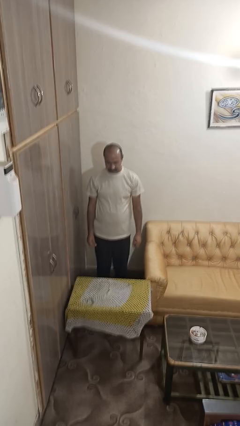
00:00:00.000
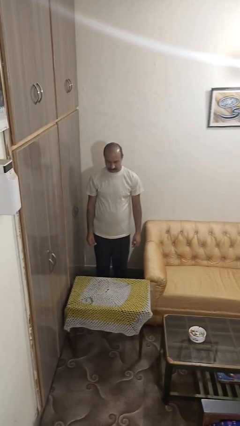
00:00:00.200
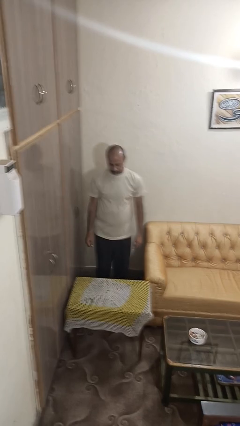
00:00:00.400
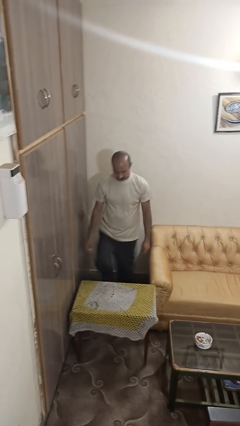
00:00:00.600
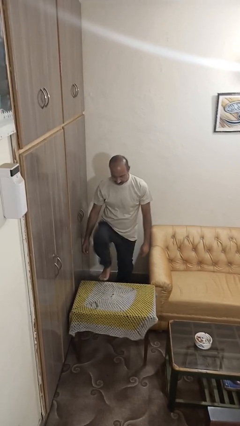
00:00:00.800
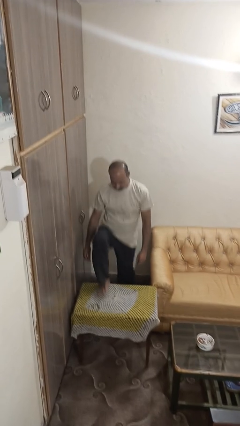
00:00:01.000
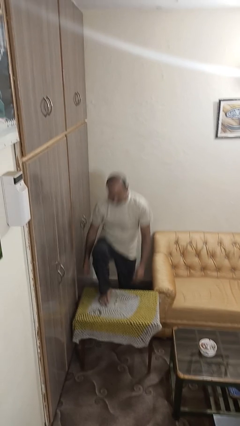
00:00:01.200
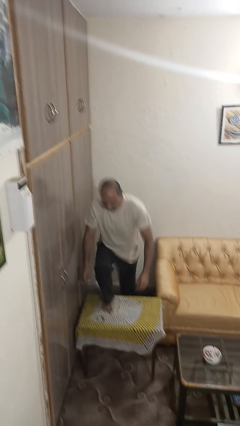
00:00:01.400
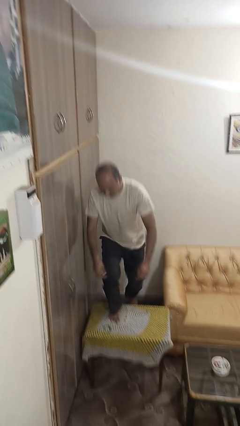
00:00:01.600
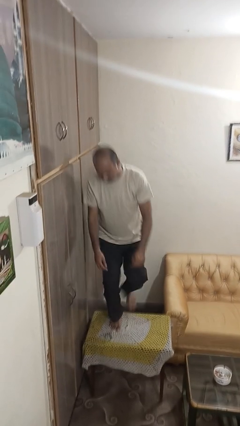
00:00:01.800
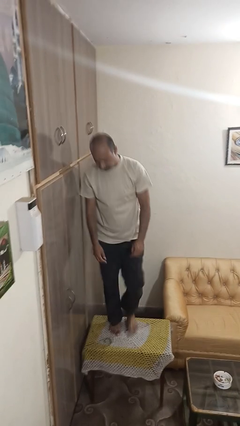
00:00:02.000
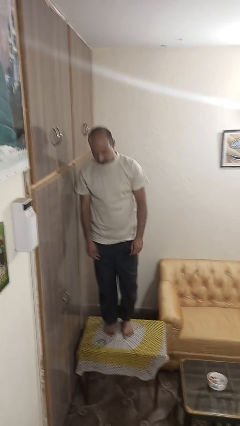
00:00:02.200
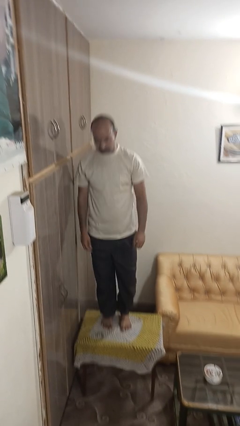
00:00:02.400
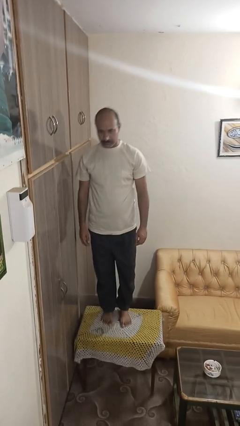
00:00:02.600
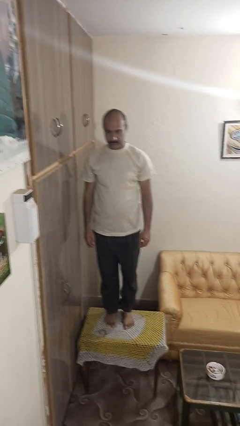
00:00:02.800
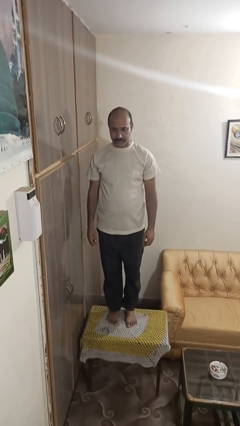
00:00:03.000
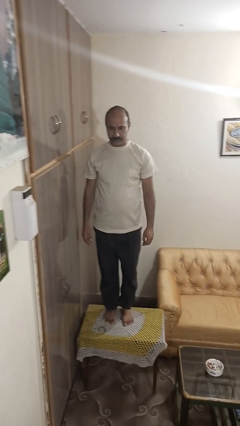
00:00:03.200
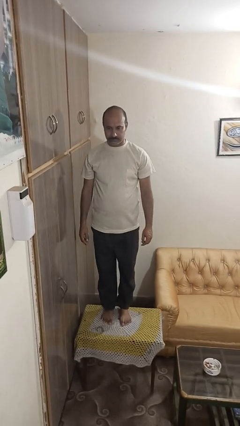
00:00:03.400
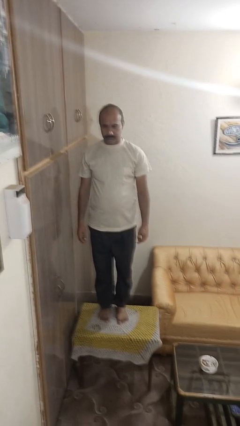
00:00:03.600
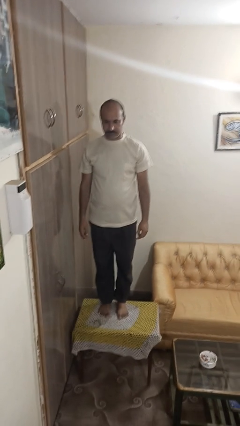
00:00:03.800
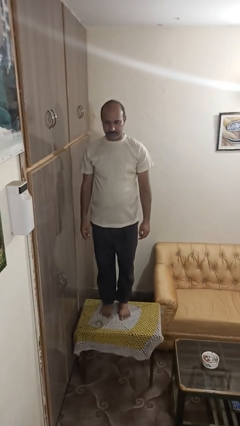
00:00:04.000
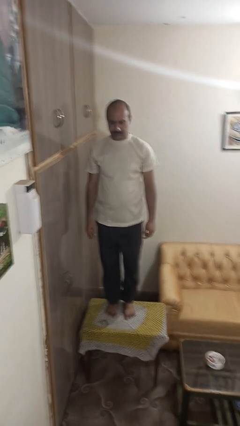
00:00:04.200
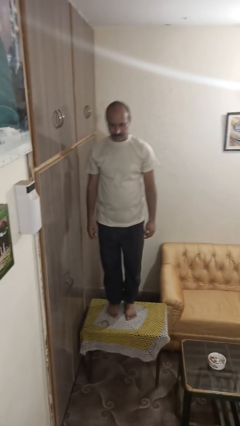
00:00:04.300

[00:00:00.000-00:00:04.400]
person climbs on table

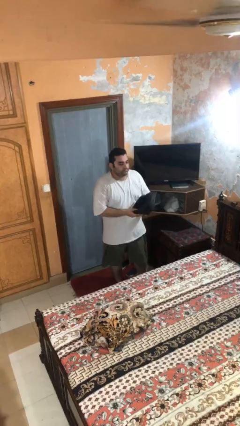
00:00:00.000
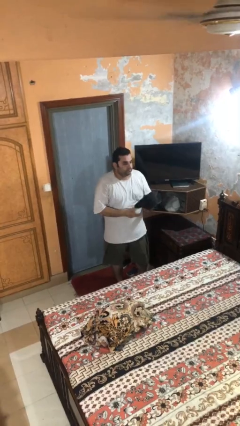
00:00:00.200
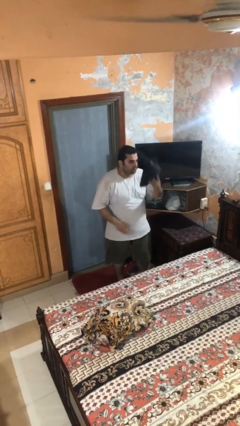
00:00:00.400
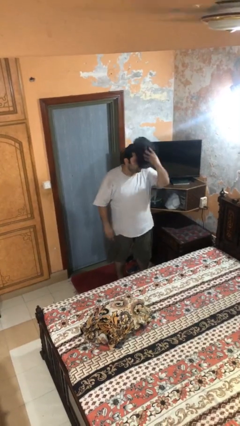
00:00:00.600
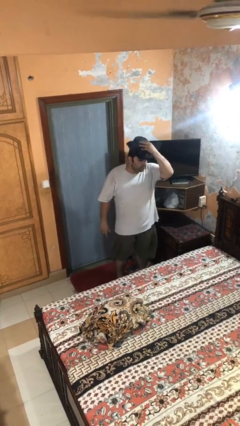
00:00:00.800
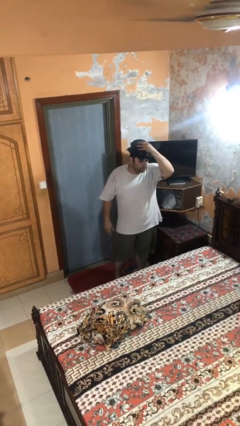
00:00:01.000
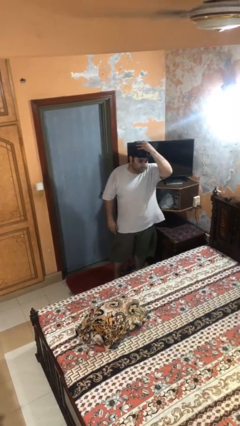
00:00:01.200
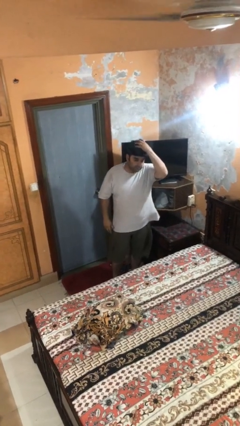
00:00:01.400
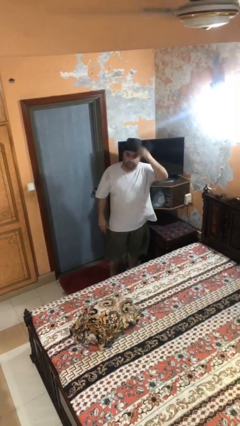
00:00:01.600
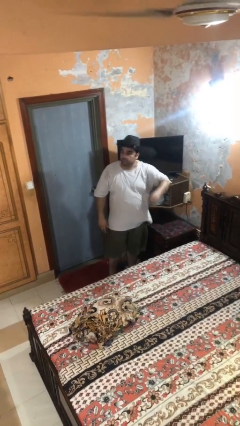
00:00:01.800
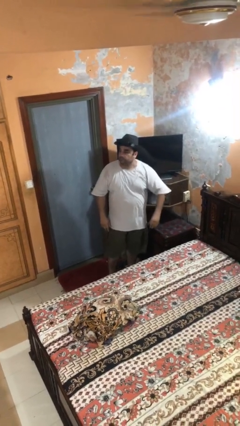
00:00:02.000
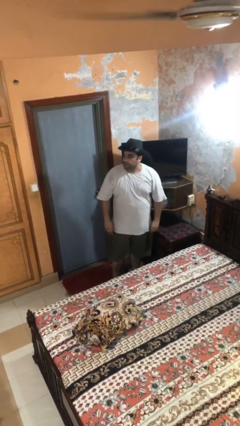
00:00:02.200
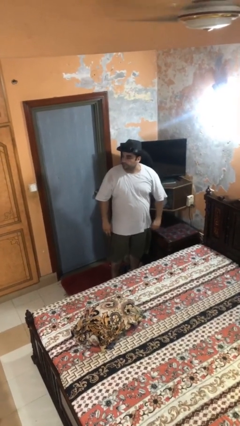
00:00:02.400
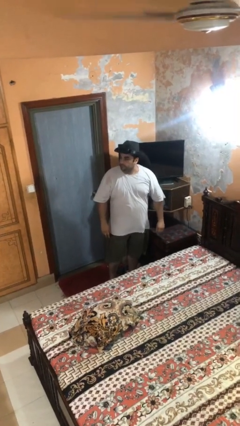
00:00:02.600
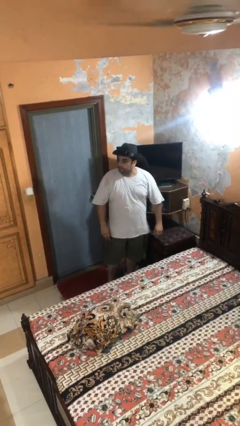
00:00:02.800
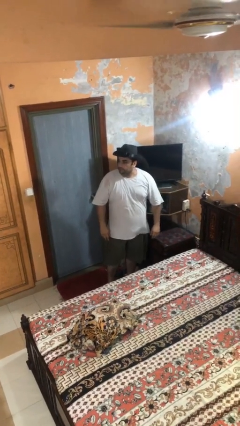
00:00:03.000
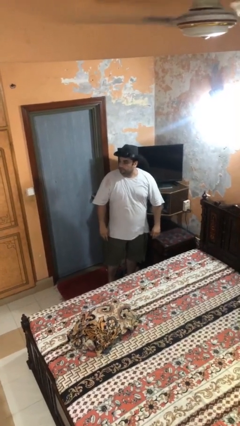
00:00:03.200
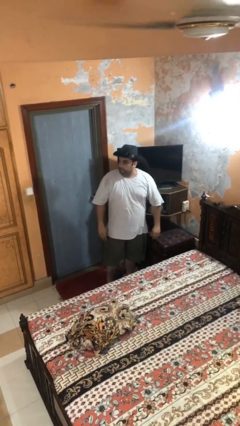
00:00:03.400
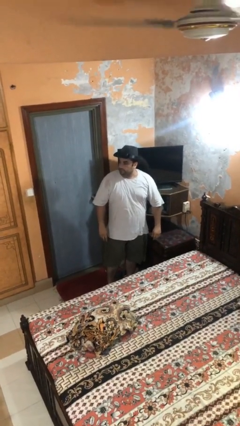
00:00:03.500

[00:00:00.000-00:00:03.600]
person puts on hat

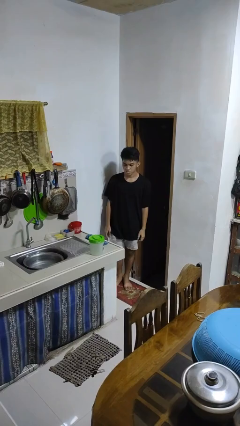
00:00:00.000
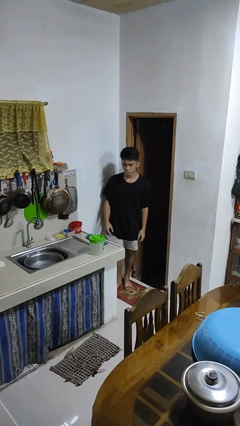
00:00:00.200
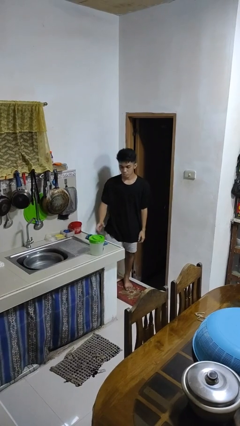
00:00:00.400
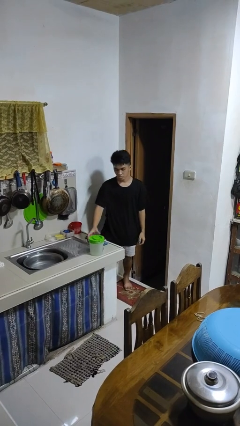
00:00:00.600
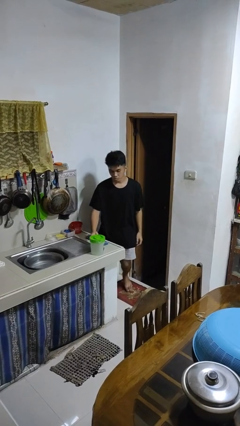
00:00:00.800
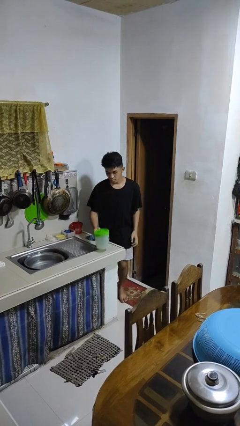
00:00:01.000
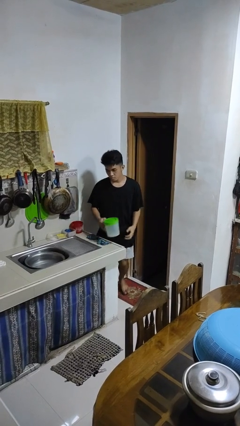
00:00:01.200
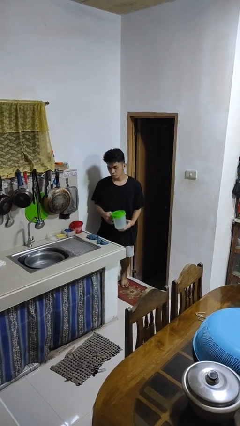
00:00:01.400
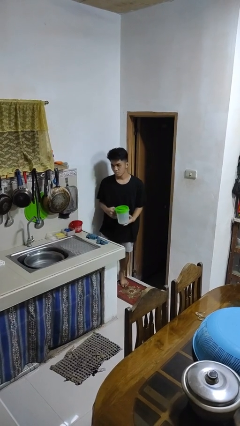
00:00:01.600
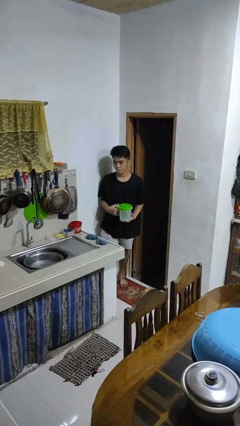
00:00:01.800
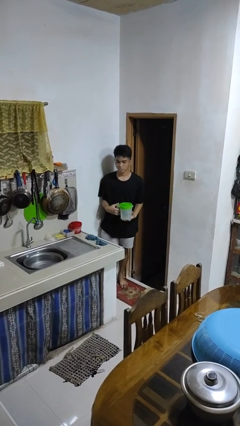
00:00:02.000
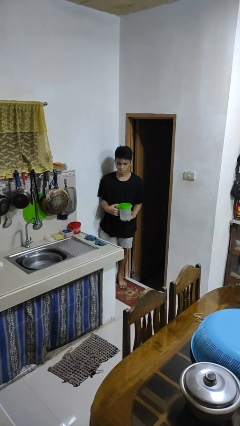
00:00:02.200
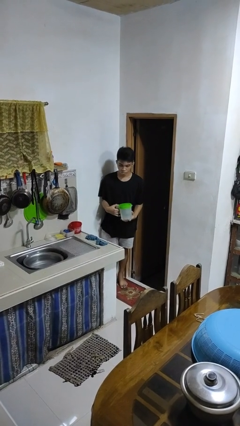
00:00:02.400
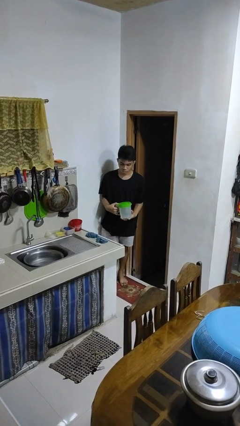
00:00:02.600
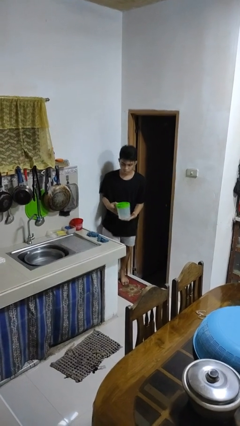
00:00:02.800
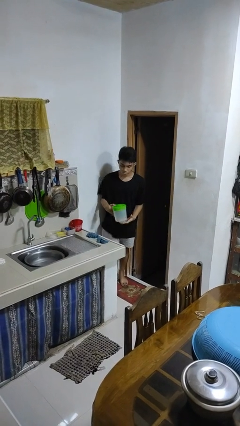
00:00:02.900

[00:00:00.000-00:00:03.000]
person picks up object from countertop

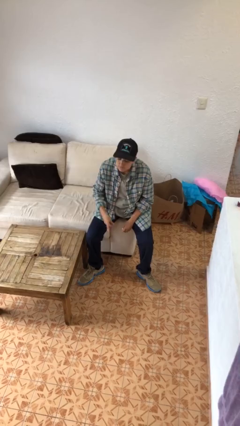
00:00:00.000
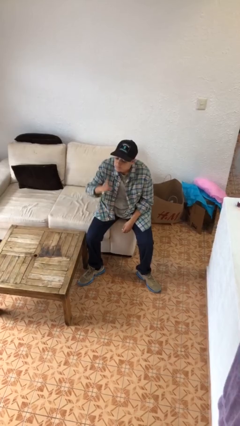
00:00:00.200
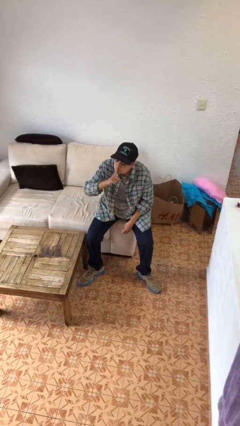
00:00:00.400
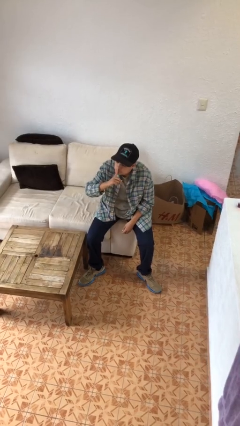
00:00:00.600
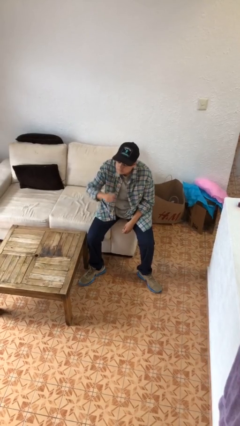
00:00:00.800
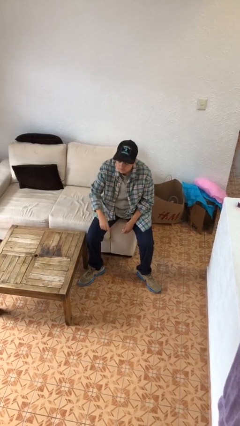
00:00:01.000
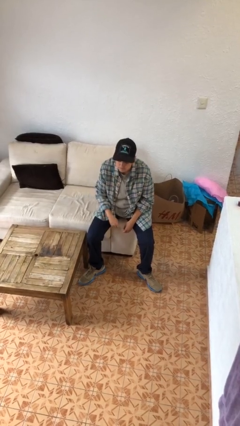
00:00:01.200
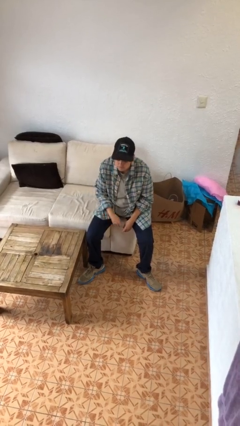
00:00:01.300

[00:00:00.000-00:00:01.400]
person gestures be quiet

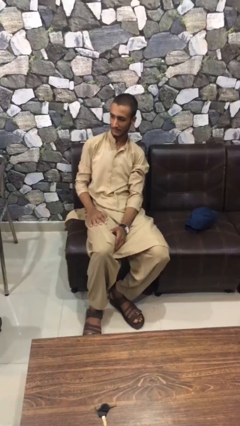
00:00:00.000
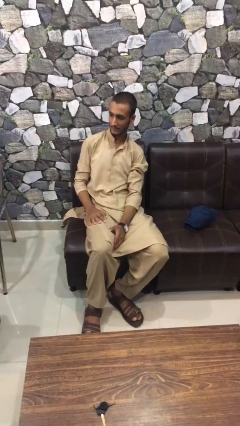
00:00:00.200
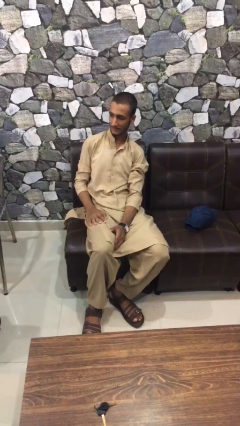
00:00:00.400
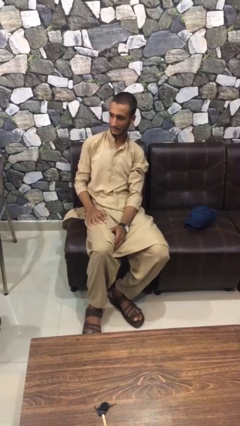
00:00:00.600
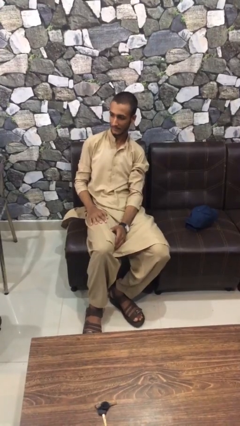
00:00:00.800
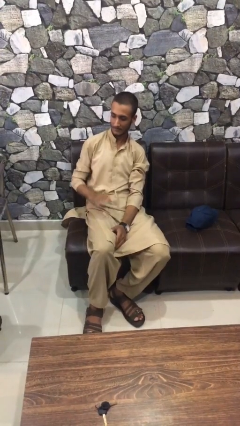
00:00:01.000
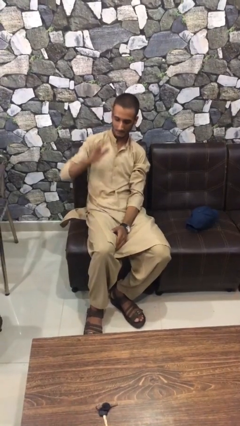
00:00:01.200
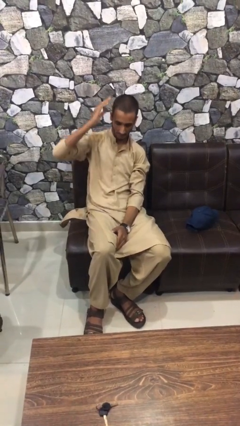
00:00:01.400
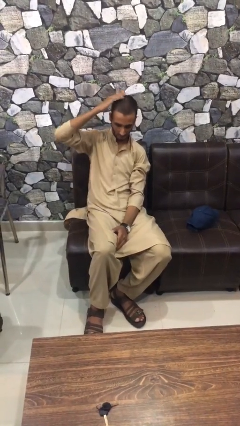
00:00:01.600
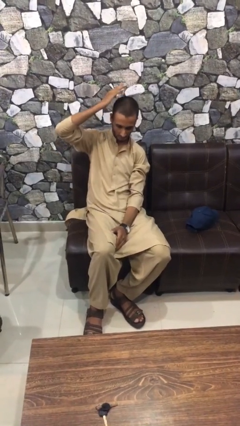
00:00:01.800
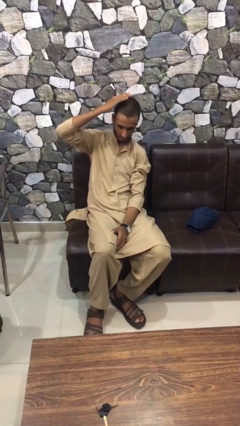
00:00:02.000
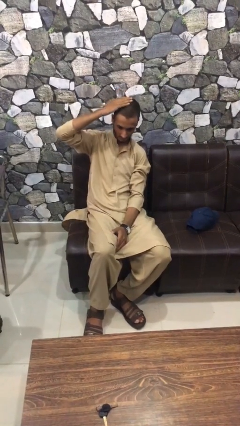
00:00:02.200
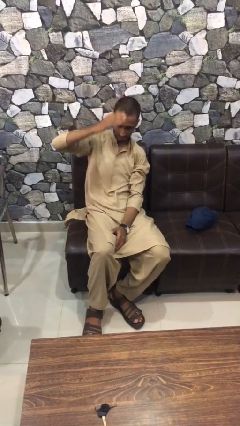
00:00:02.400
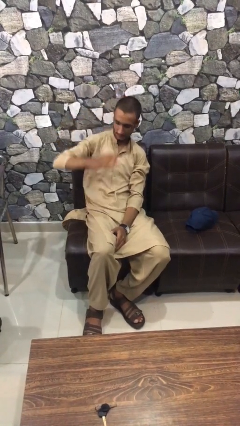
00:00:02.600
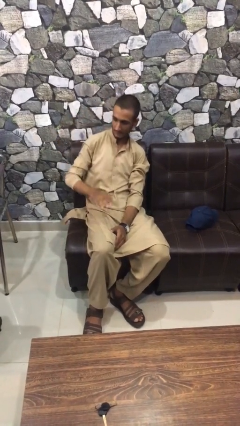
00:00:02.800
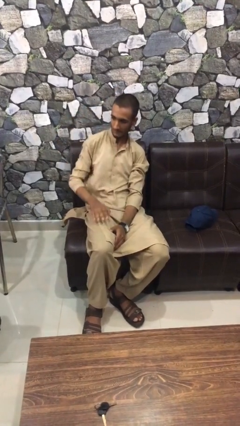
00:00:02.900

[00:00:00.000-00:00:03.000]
person pats head

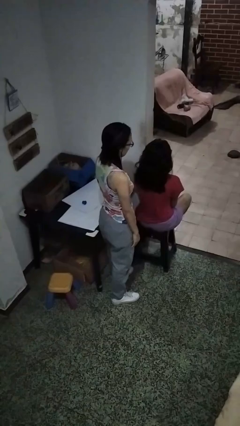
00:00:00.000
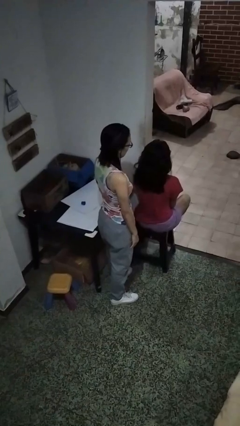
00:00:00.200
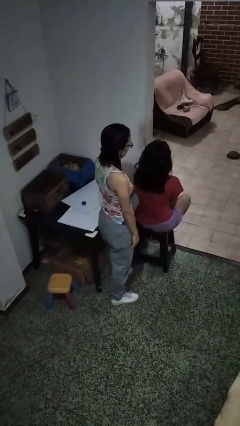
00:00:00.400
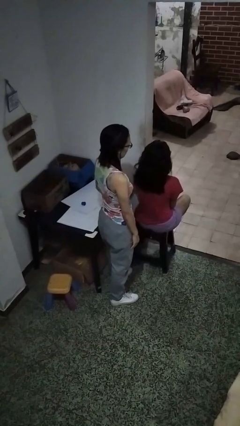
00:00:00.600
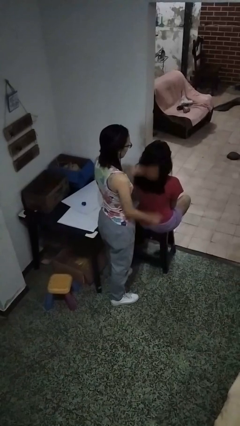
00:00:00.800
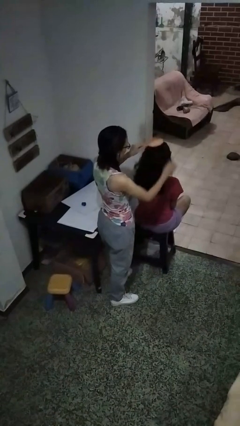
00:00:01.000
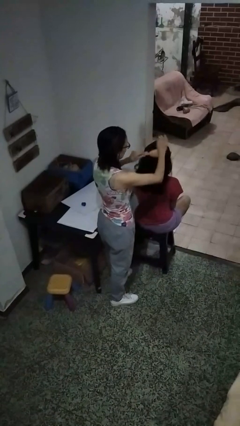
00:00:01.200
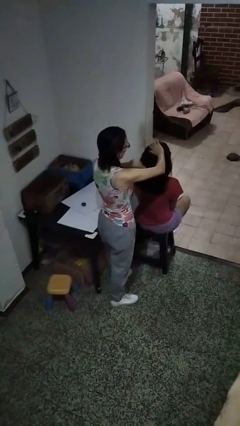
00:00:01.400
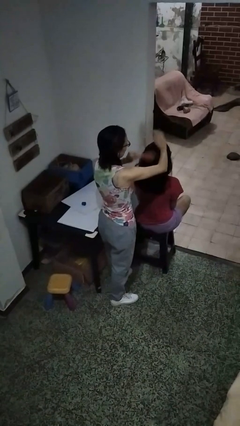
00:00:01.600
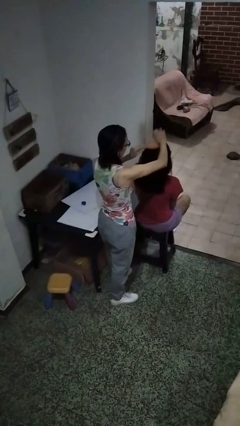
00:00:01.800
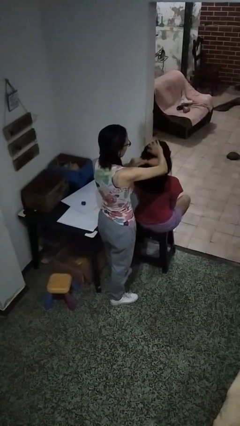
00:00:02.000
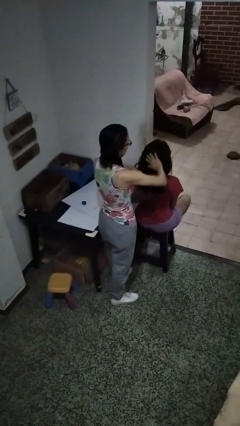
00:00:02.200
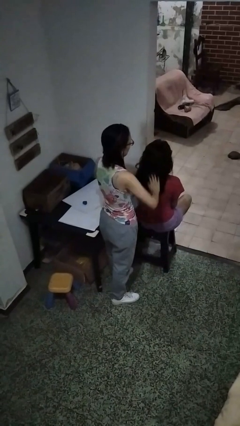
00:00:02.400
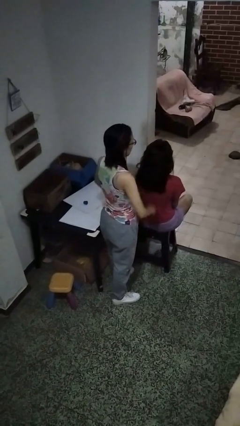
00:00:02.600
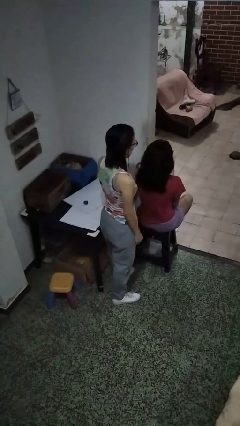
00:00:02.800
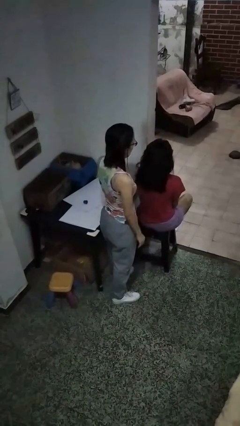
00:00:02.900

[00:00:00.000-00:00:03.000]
person brushes hair of person
